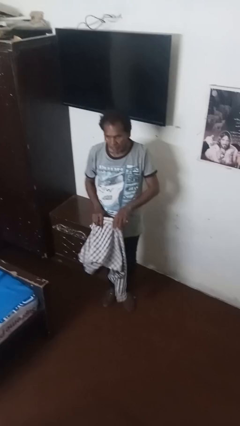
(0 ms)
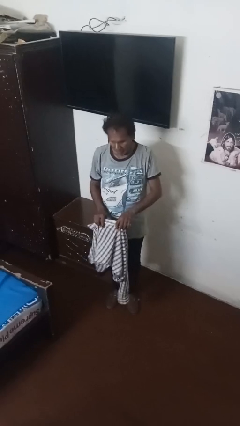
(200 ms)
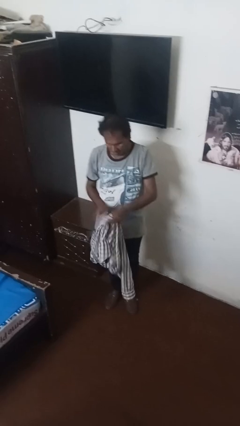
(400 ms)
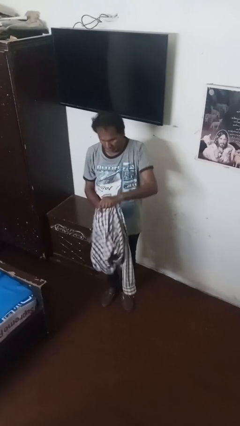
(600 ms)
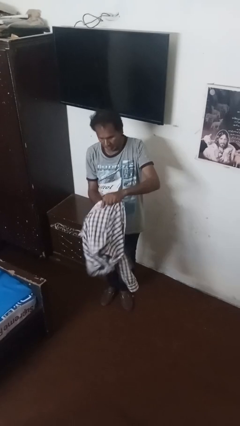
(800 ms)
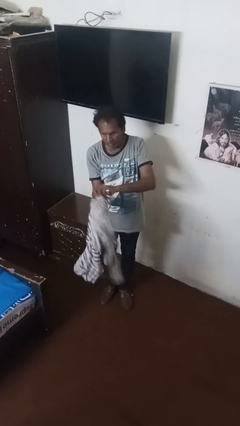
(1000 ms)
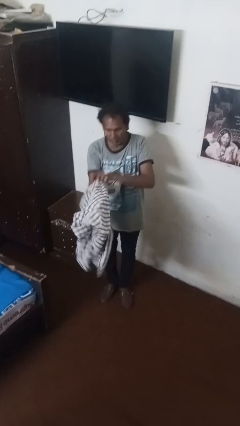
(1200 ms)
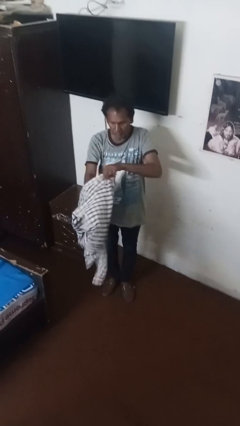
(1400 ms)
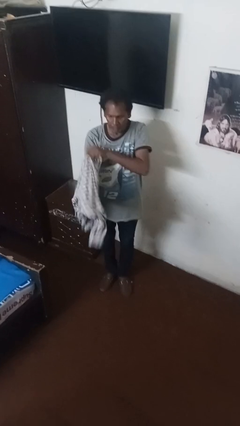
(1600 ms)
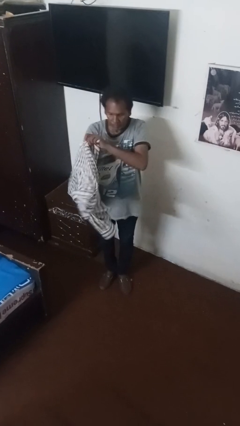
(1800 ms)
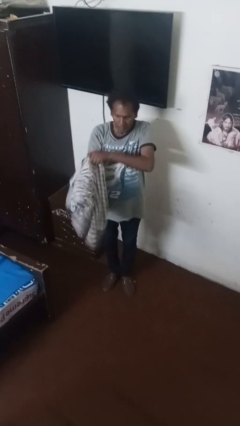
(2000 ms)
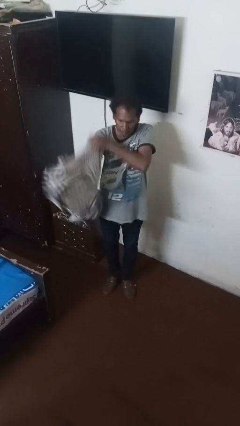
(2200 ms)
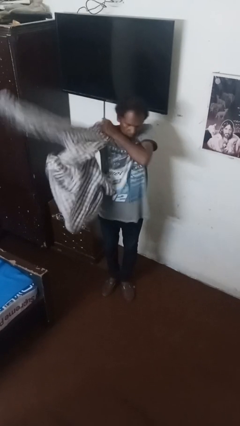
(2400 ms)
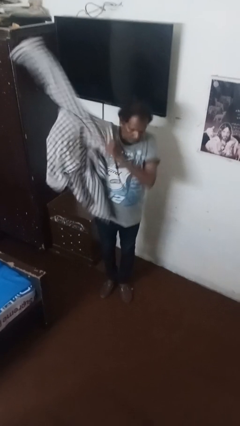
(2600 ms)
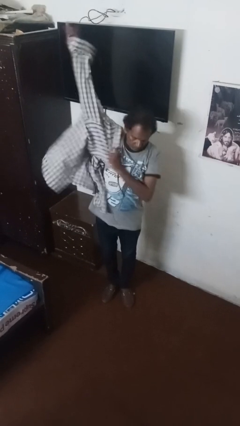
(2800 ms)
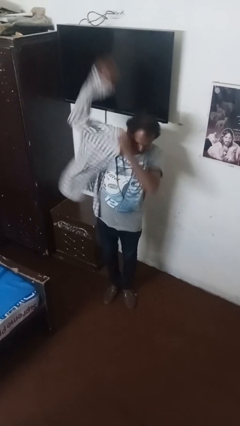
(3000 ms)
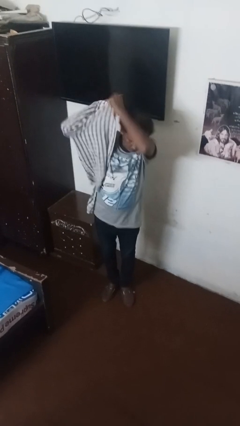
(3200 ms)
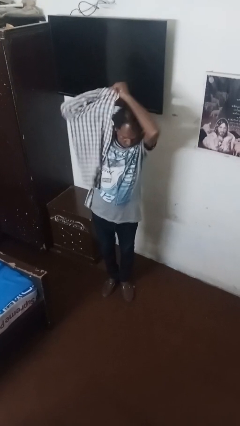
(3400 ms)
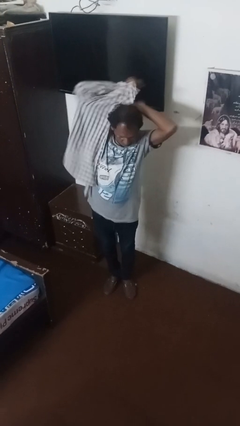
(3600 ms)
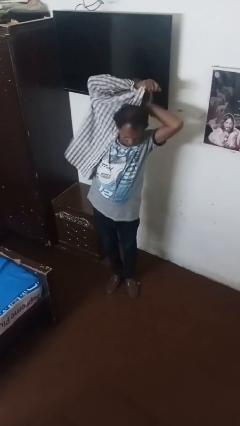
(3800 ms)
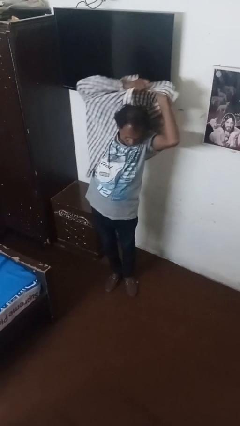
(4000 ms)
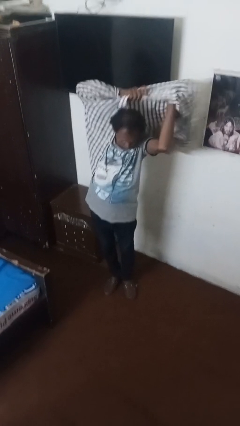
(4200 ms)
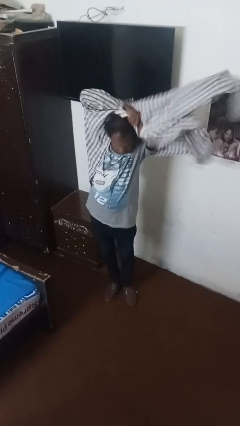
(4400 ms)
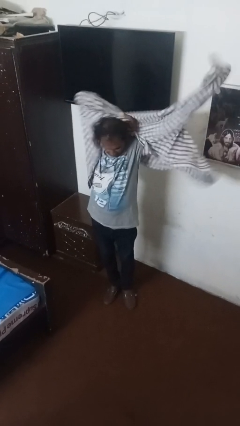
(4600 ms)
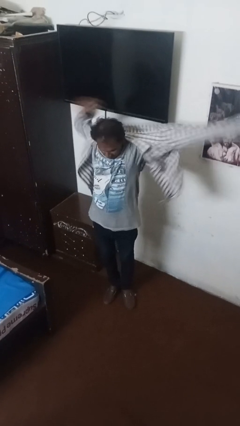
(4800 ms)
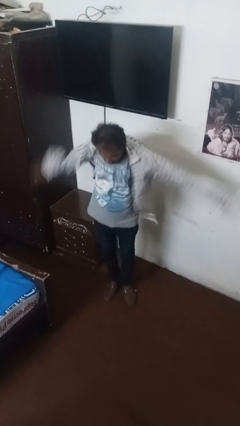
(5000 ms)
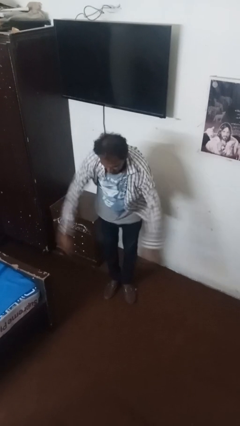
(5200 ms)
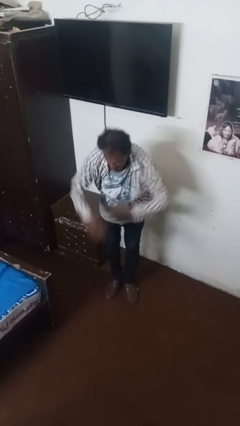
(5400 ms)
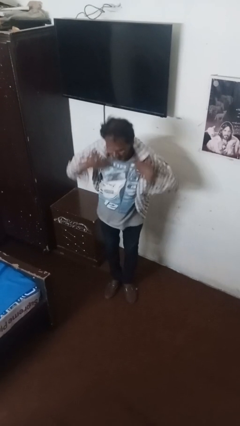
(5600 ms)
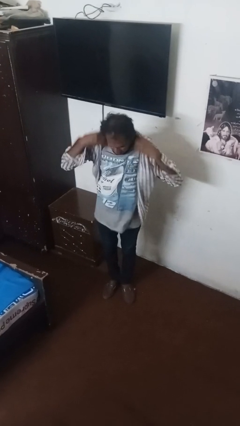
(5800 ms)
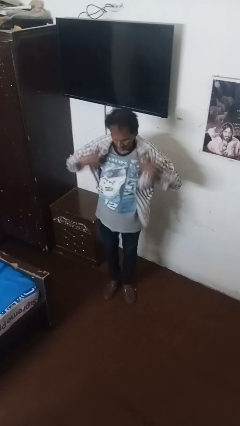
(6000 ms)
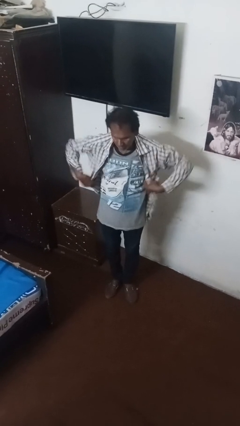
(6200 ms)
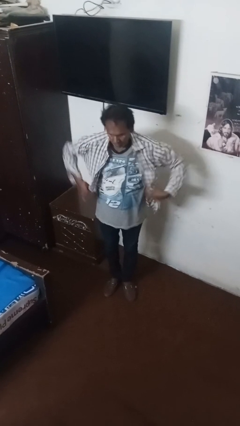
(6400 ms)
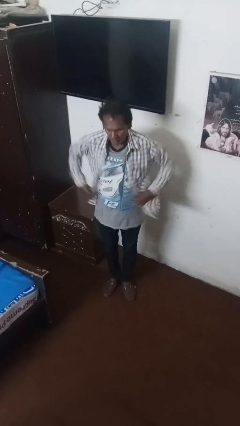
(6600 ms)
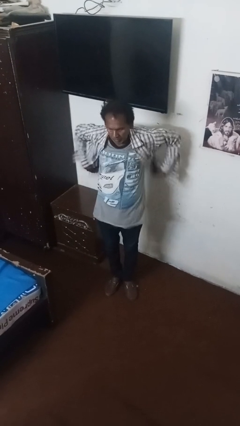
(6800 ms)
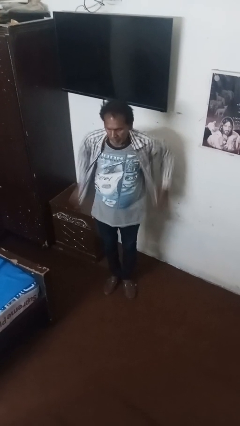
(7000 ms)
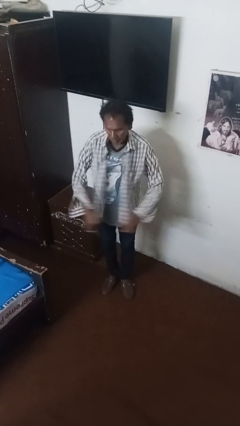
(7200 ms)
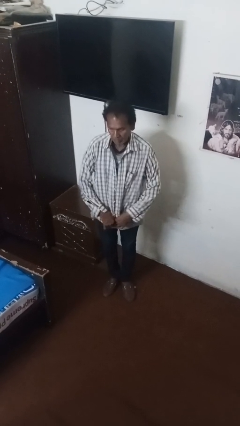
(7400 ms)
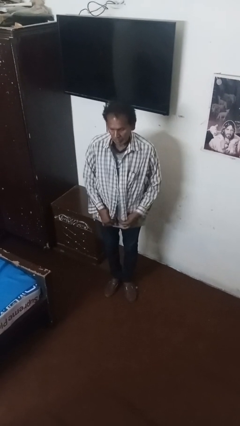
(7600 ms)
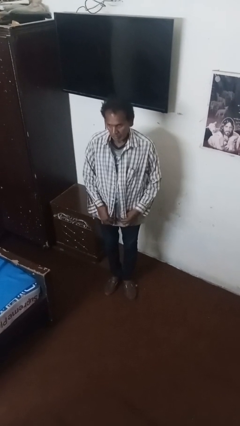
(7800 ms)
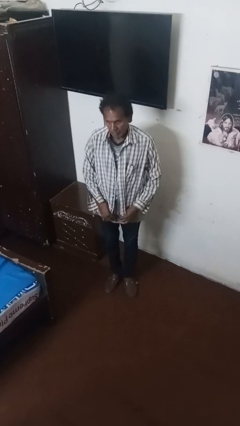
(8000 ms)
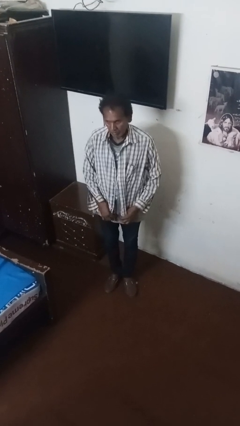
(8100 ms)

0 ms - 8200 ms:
person puts on shirt

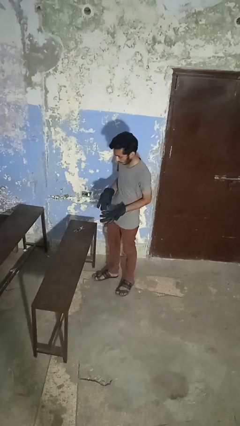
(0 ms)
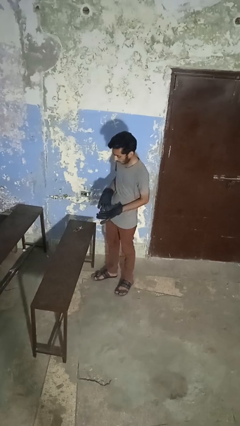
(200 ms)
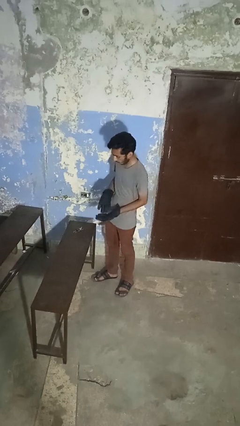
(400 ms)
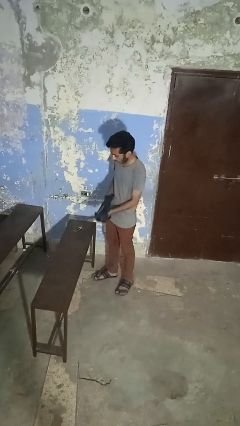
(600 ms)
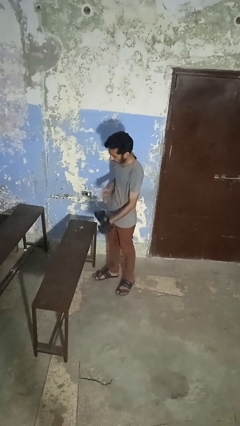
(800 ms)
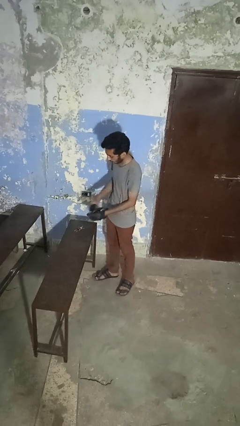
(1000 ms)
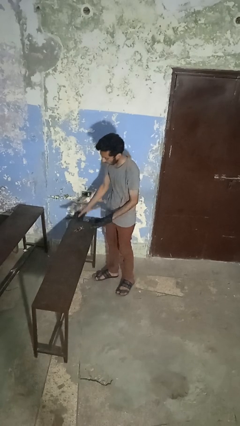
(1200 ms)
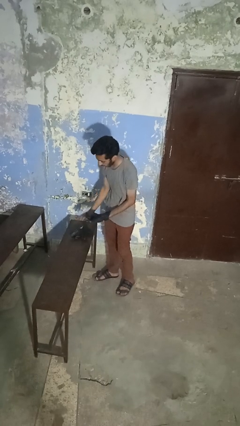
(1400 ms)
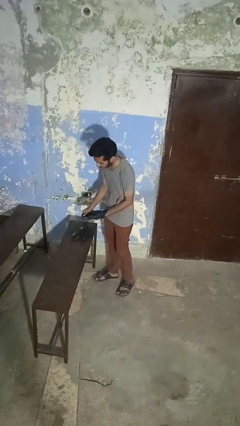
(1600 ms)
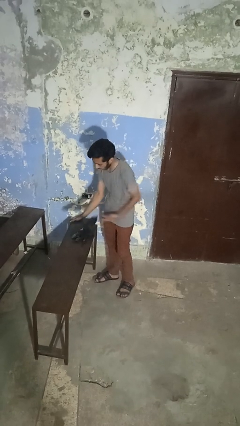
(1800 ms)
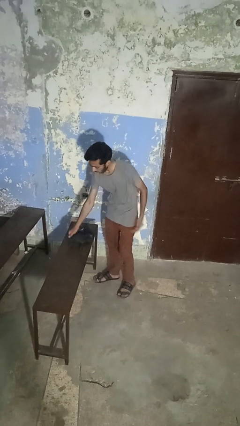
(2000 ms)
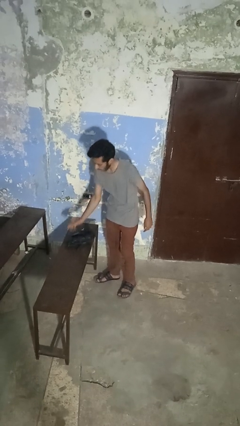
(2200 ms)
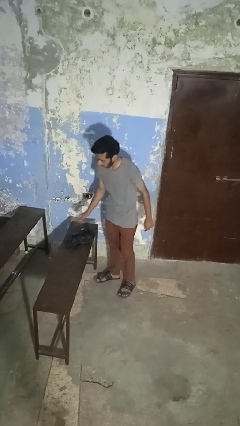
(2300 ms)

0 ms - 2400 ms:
person takes off gloves

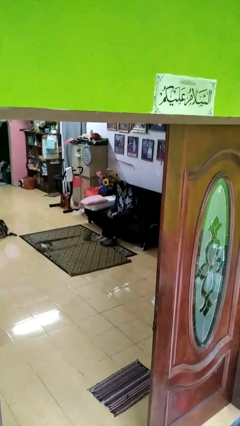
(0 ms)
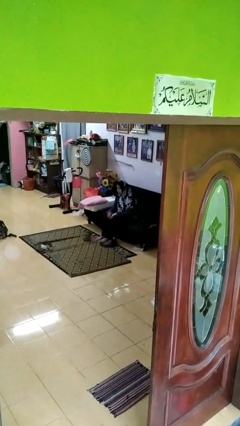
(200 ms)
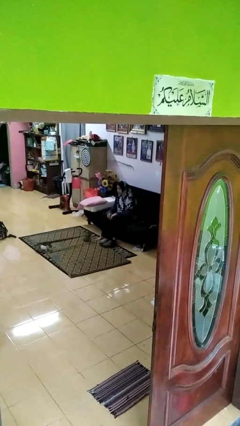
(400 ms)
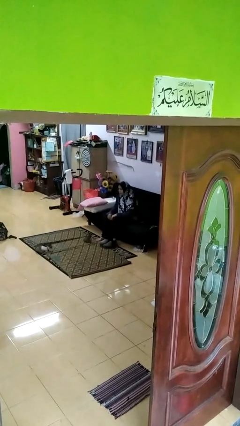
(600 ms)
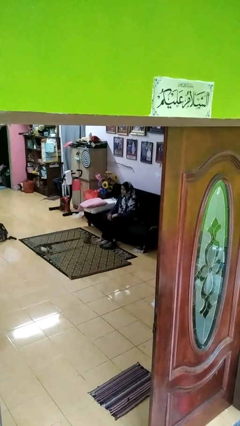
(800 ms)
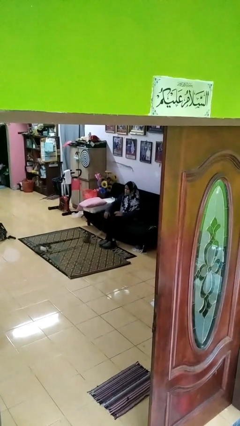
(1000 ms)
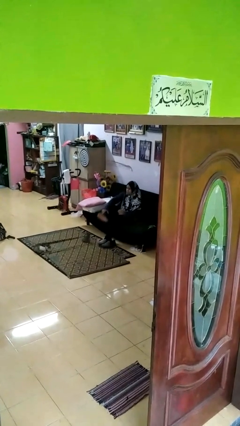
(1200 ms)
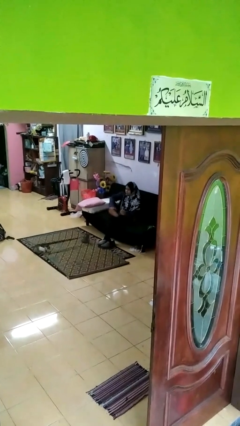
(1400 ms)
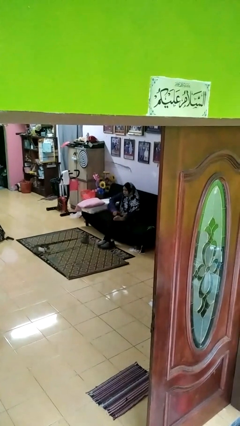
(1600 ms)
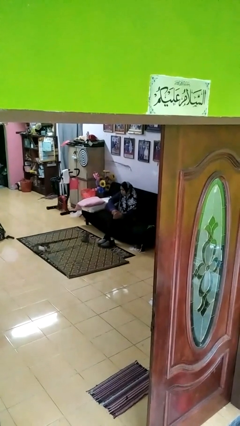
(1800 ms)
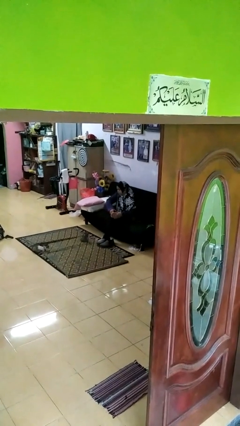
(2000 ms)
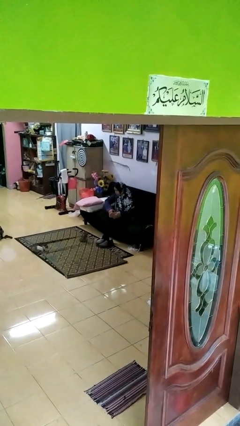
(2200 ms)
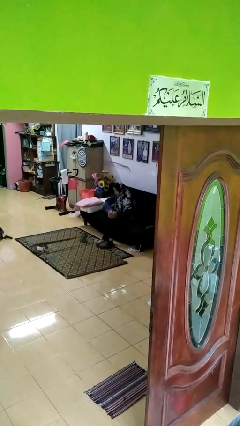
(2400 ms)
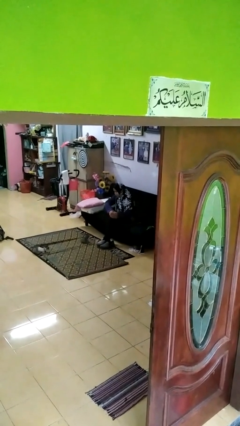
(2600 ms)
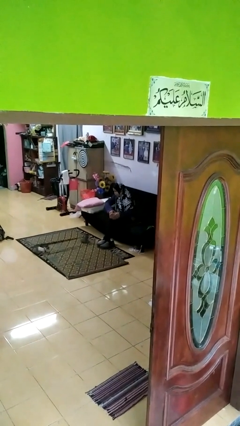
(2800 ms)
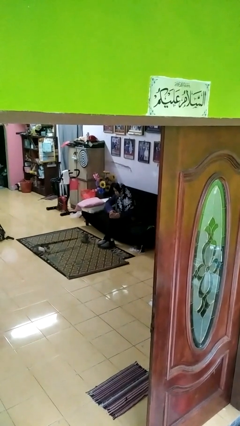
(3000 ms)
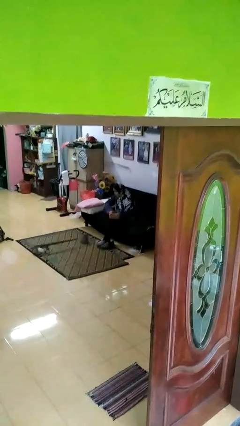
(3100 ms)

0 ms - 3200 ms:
person rubs foot

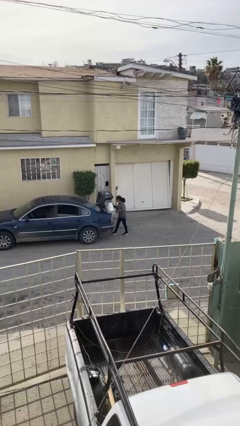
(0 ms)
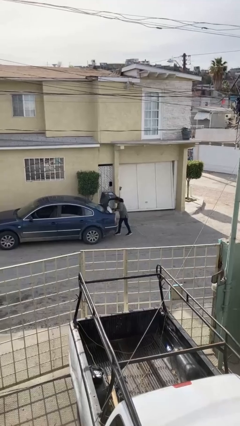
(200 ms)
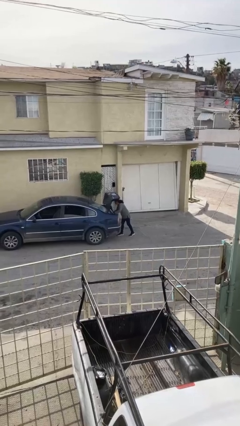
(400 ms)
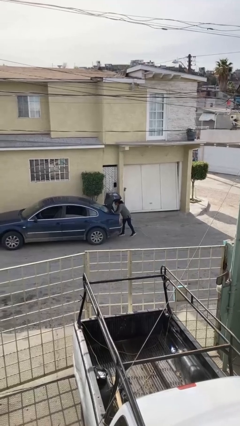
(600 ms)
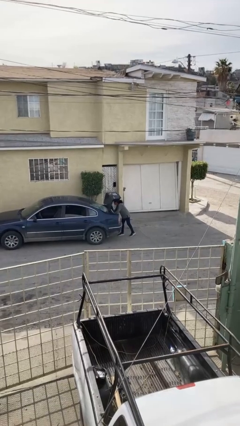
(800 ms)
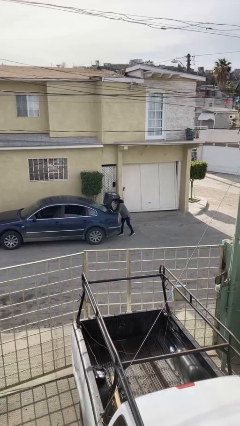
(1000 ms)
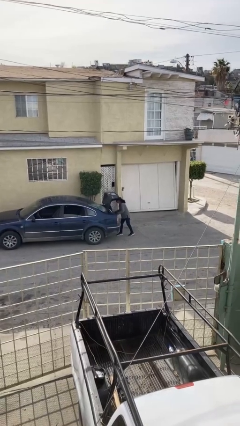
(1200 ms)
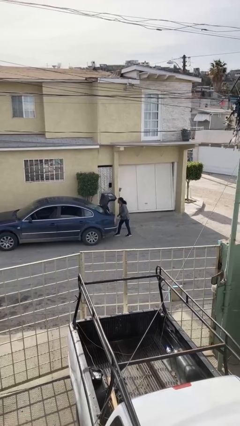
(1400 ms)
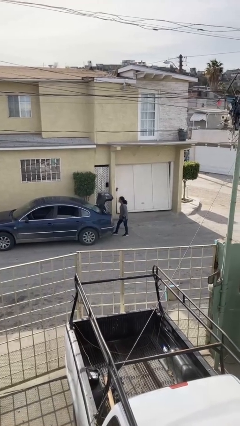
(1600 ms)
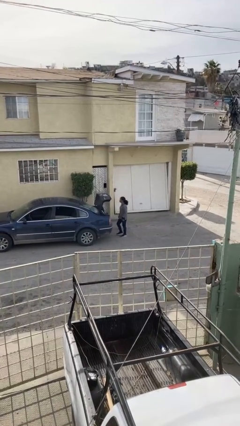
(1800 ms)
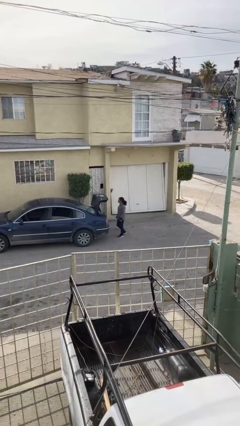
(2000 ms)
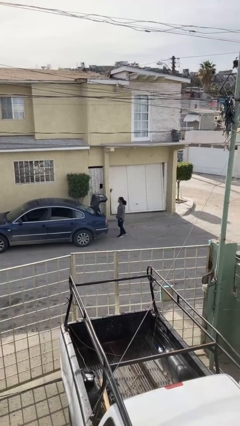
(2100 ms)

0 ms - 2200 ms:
person loads car

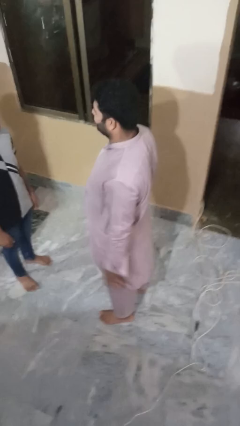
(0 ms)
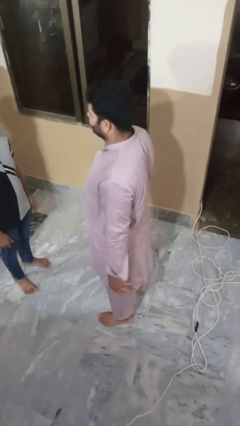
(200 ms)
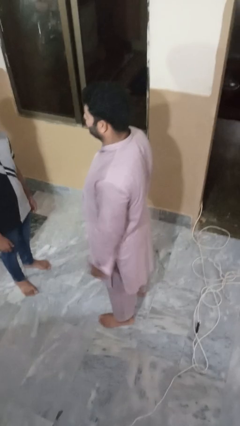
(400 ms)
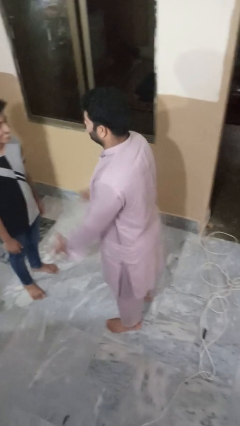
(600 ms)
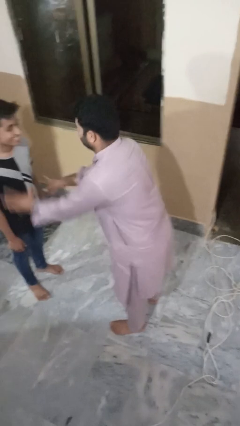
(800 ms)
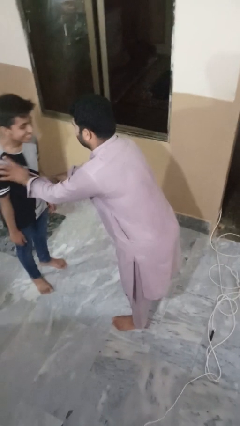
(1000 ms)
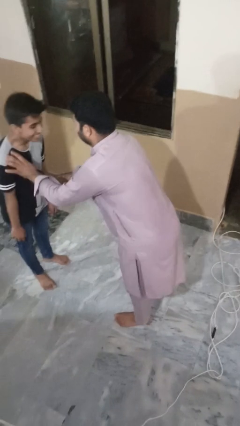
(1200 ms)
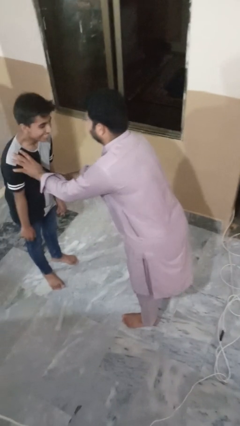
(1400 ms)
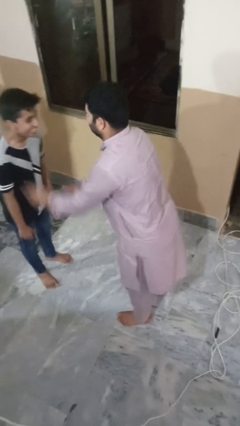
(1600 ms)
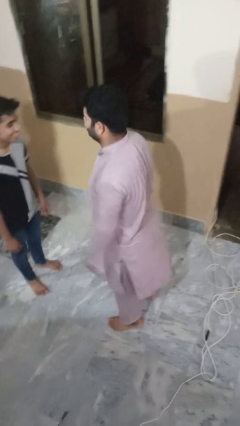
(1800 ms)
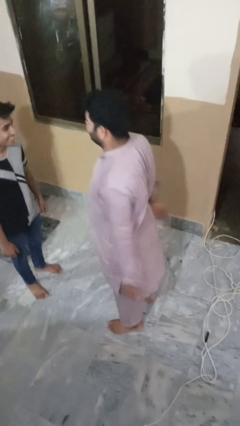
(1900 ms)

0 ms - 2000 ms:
person tickles person
